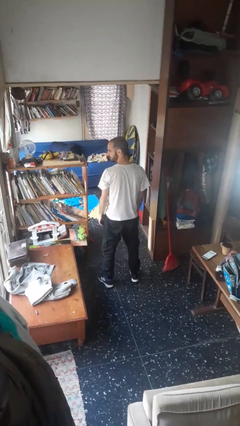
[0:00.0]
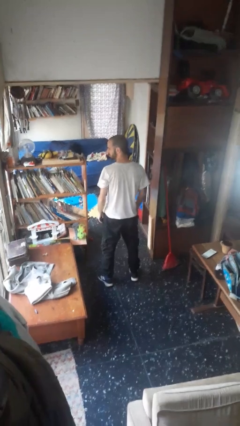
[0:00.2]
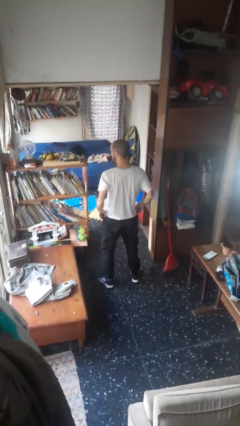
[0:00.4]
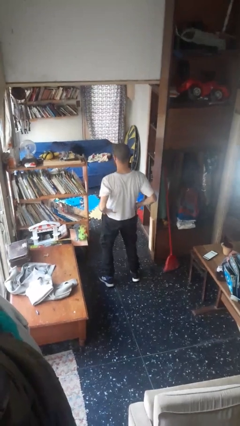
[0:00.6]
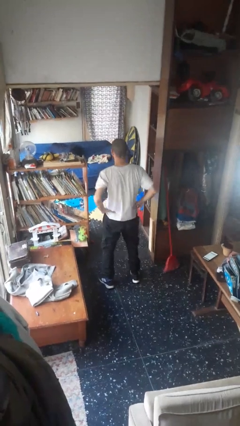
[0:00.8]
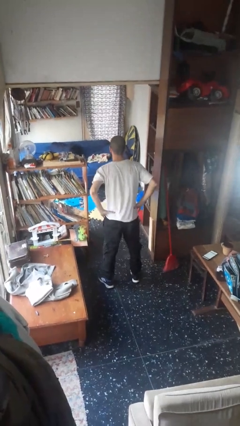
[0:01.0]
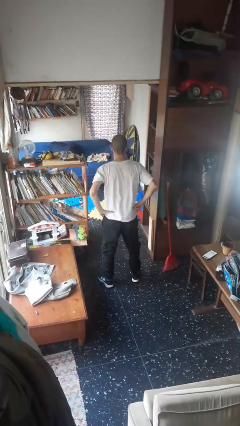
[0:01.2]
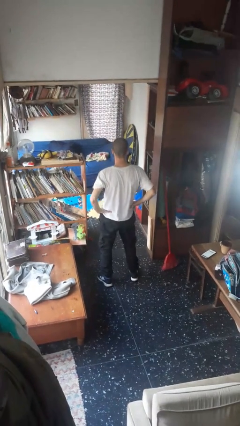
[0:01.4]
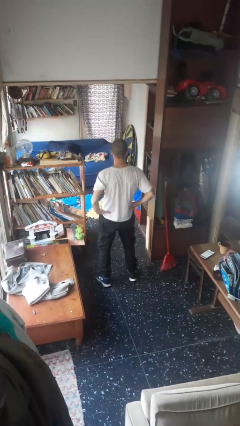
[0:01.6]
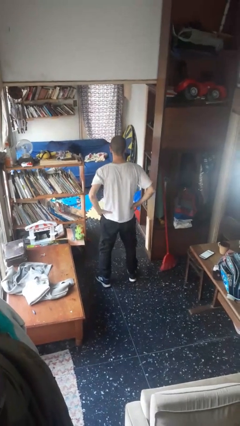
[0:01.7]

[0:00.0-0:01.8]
person wiggles hips

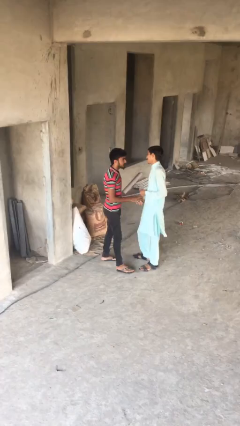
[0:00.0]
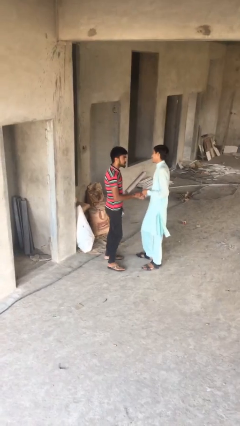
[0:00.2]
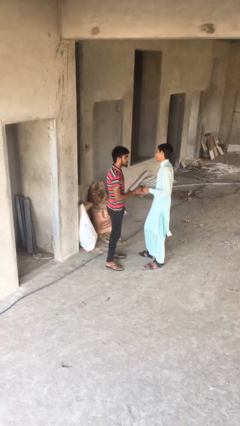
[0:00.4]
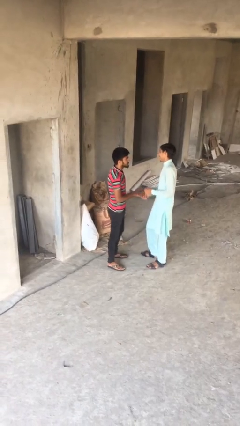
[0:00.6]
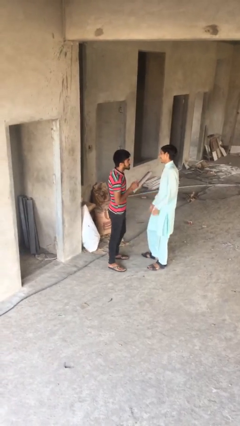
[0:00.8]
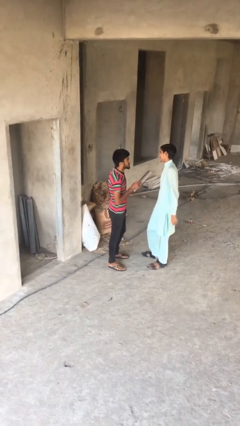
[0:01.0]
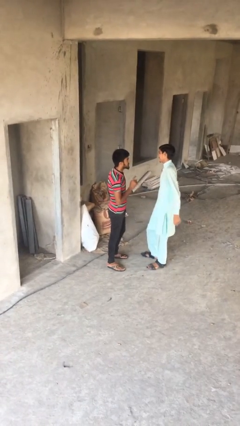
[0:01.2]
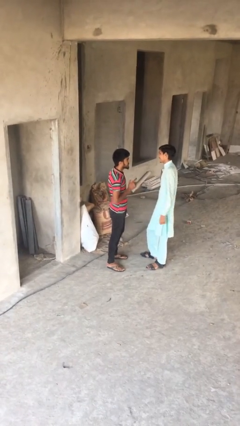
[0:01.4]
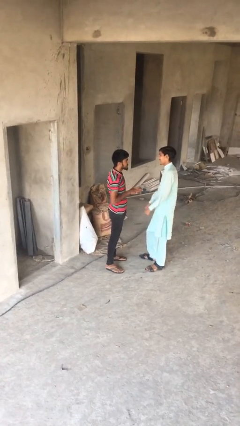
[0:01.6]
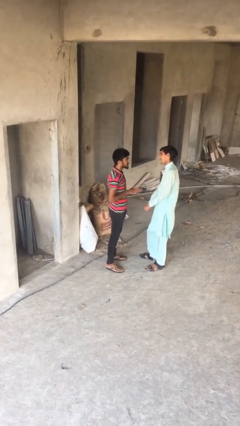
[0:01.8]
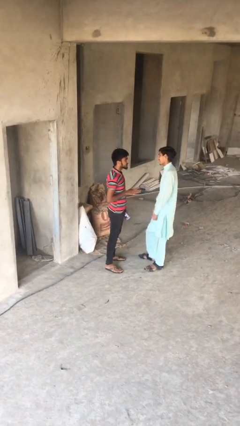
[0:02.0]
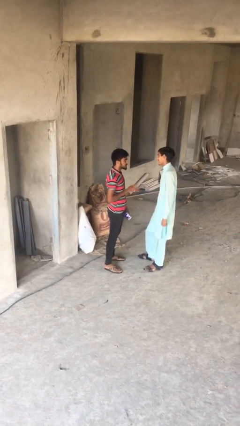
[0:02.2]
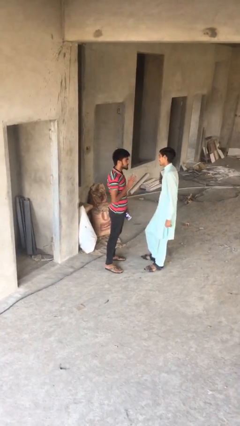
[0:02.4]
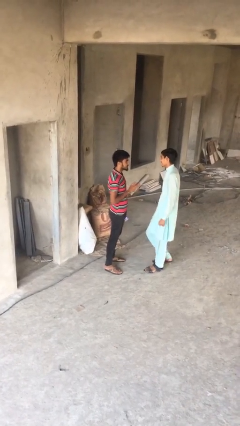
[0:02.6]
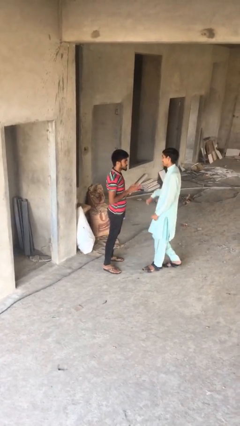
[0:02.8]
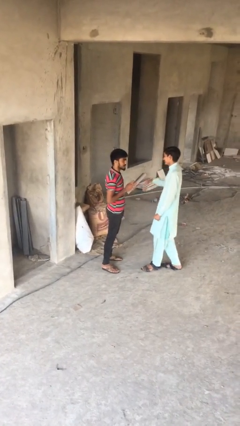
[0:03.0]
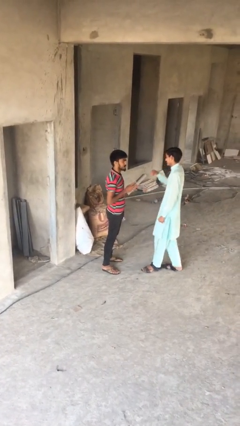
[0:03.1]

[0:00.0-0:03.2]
person talks to person

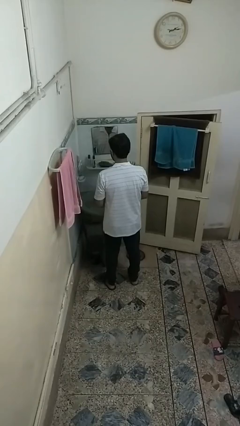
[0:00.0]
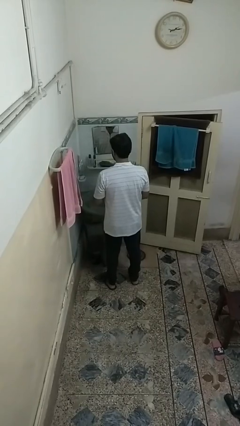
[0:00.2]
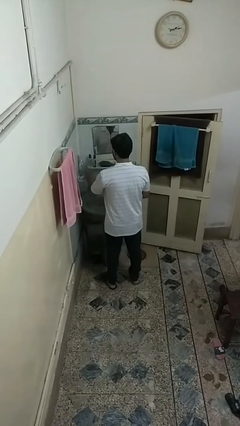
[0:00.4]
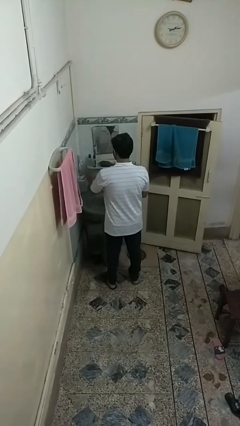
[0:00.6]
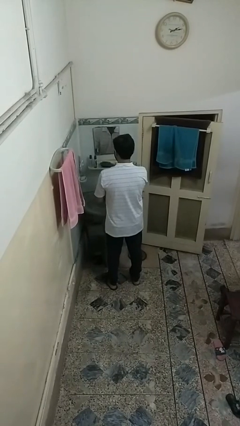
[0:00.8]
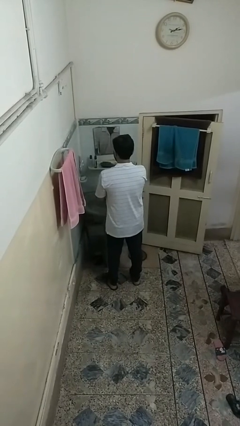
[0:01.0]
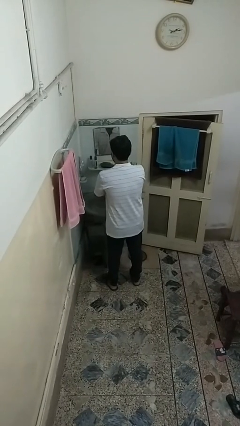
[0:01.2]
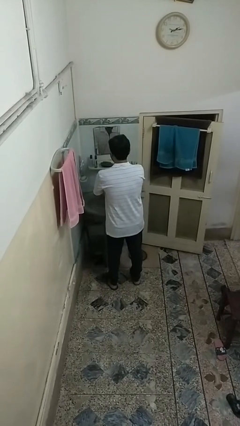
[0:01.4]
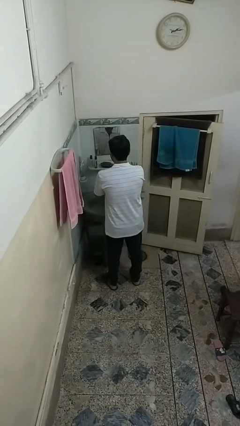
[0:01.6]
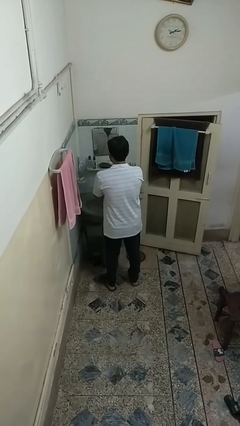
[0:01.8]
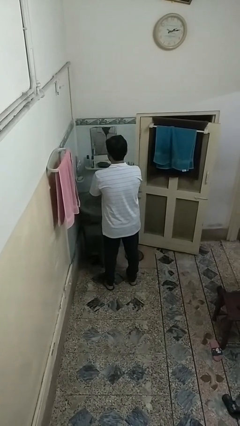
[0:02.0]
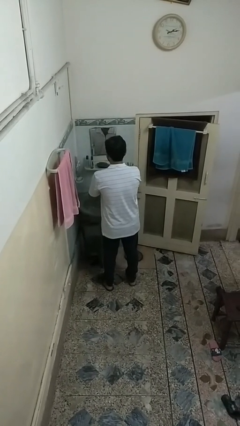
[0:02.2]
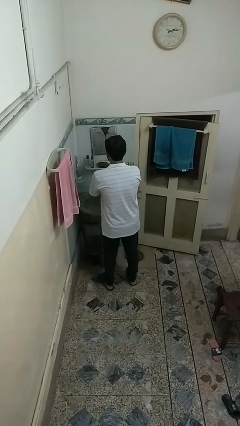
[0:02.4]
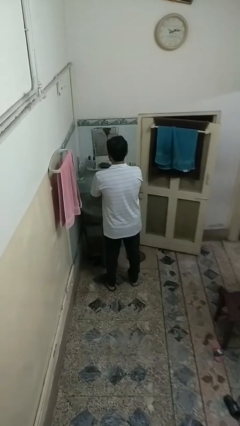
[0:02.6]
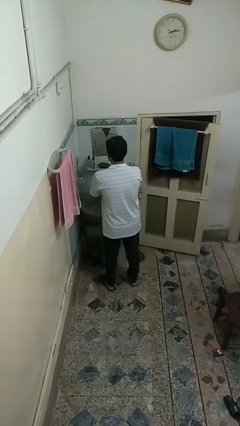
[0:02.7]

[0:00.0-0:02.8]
person washes hands

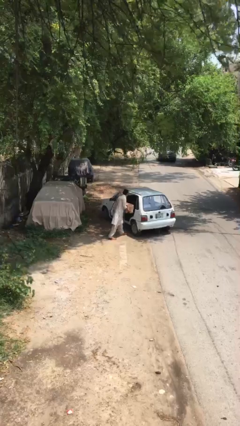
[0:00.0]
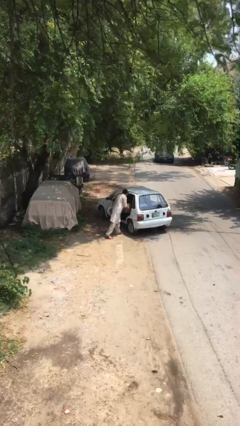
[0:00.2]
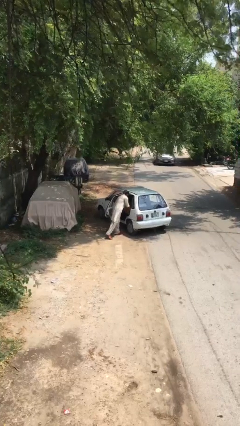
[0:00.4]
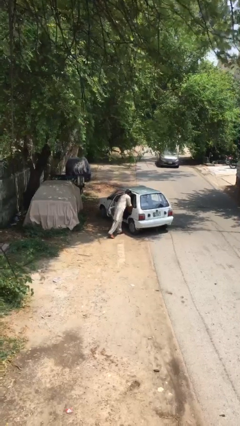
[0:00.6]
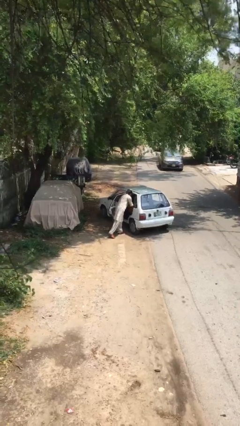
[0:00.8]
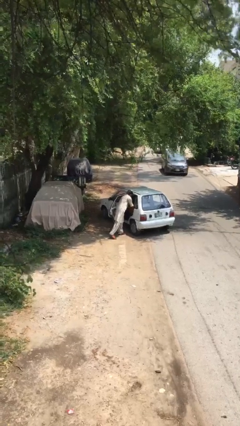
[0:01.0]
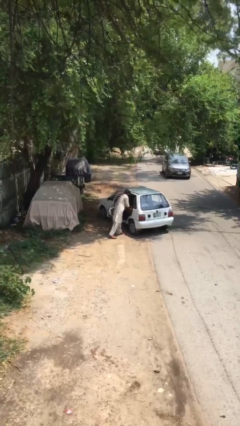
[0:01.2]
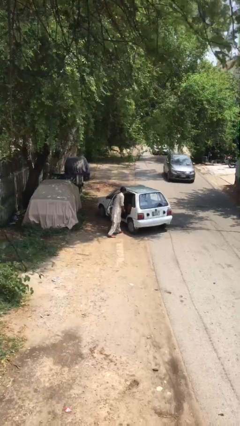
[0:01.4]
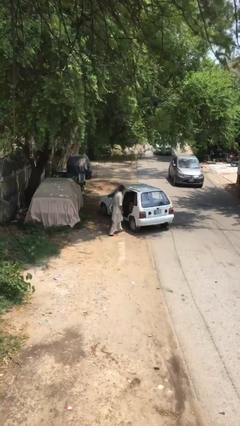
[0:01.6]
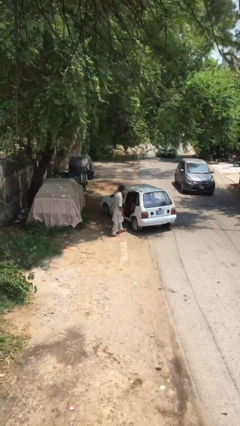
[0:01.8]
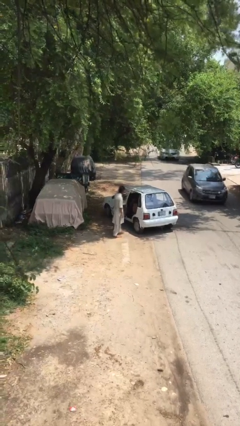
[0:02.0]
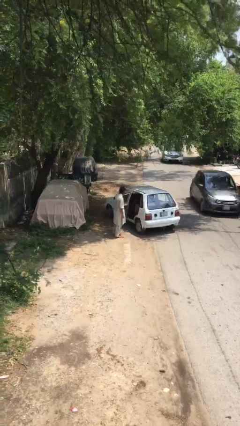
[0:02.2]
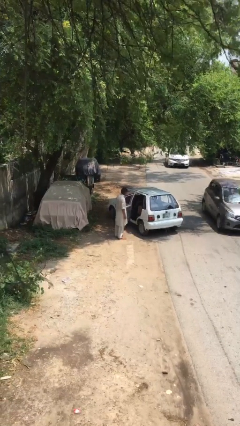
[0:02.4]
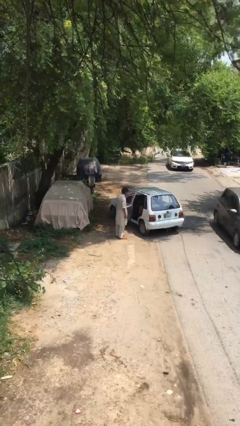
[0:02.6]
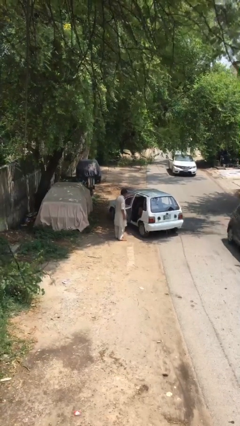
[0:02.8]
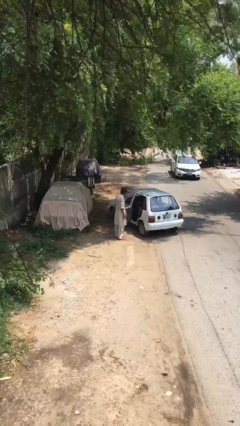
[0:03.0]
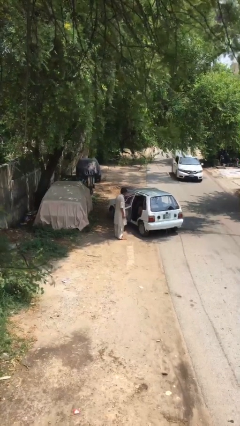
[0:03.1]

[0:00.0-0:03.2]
person loads car

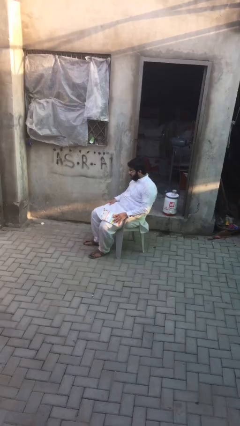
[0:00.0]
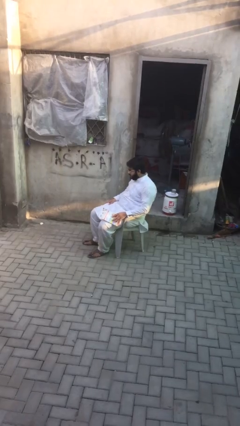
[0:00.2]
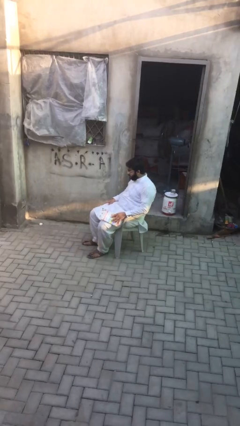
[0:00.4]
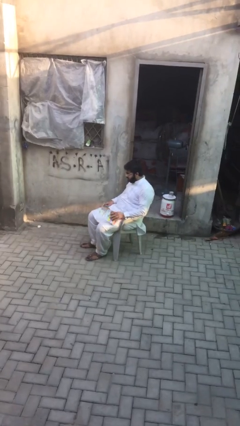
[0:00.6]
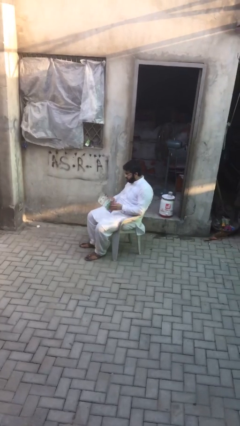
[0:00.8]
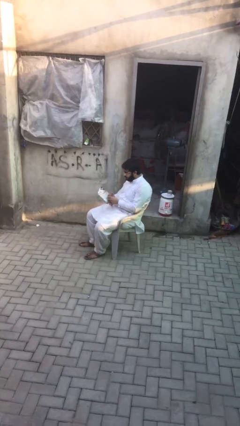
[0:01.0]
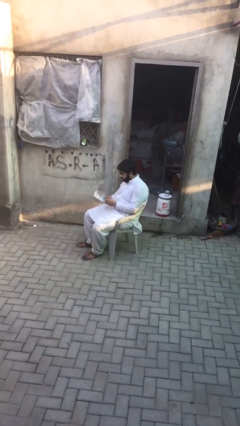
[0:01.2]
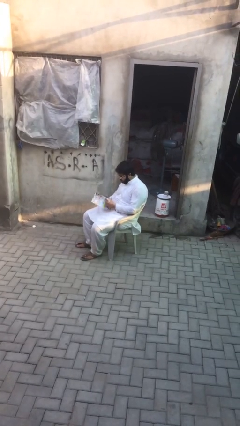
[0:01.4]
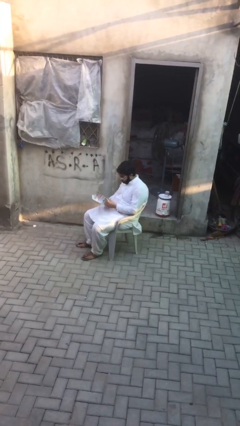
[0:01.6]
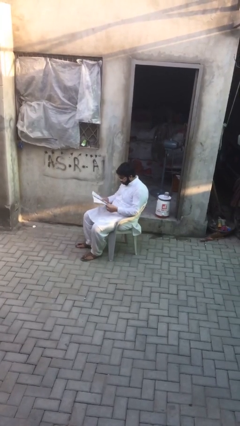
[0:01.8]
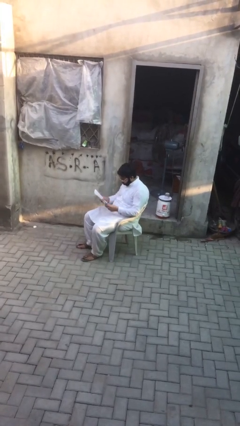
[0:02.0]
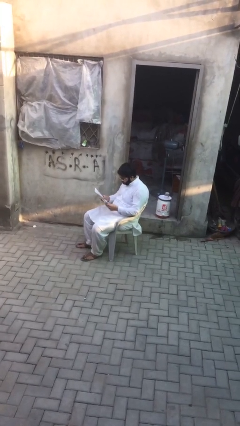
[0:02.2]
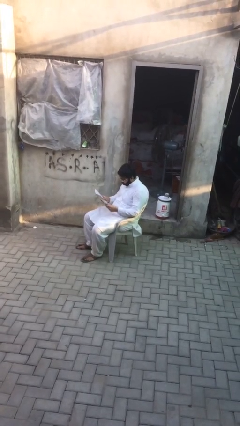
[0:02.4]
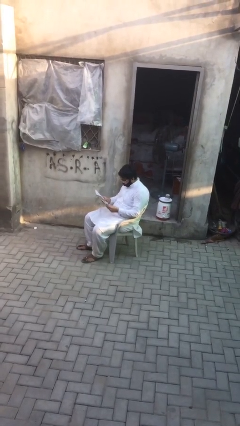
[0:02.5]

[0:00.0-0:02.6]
person reads document

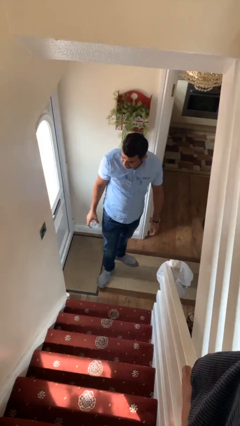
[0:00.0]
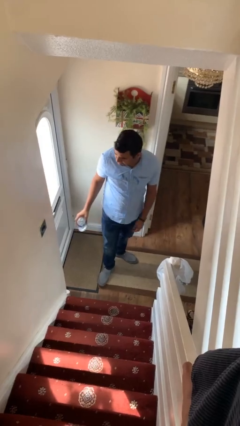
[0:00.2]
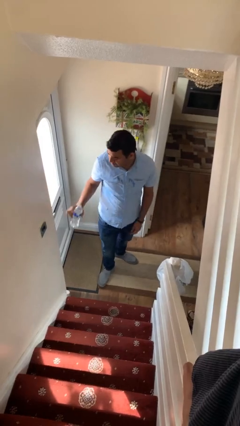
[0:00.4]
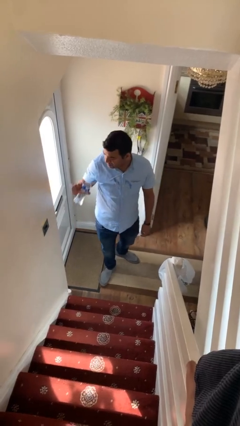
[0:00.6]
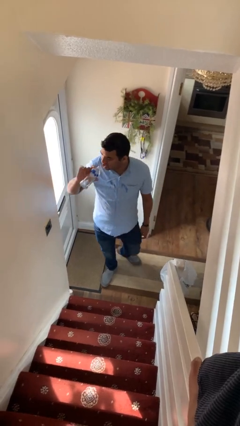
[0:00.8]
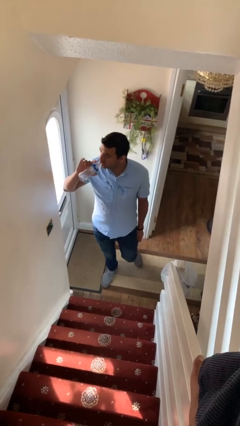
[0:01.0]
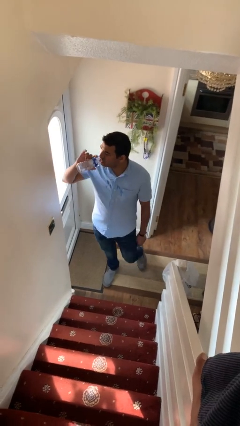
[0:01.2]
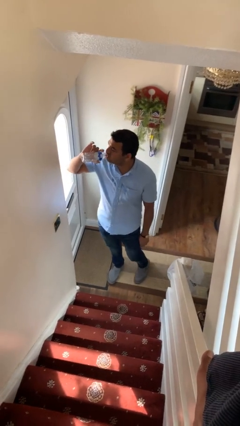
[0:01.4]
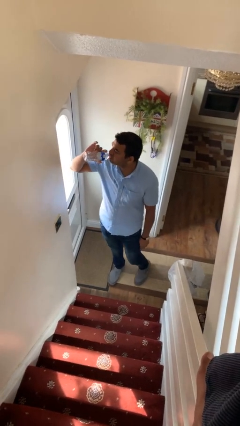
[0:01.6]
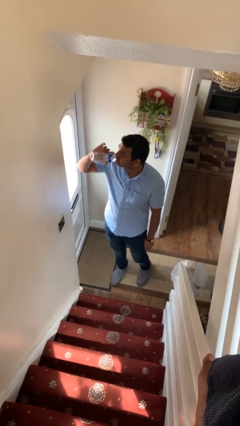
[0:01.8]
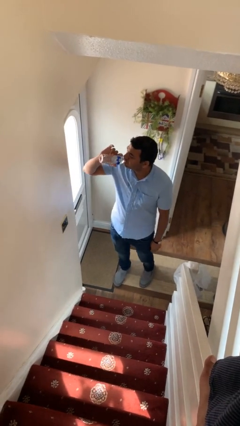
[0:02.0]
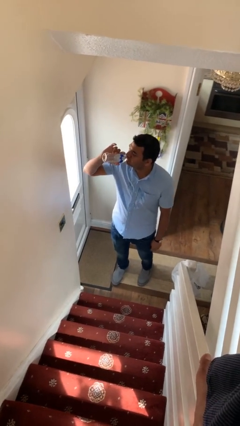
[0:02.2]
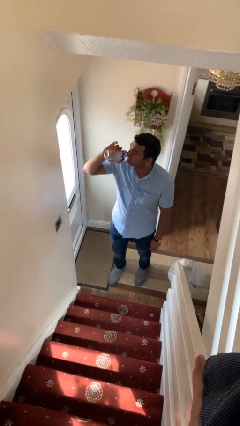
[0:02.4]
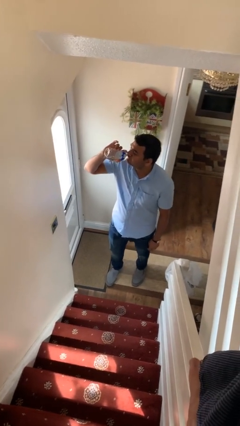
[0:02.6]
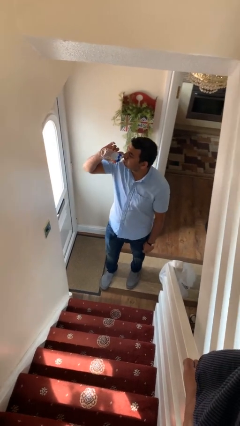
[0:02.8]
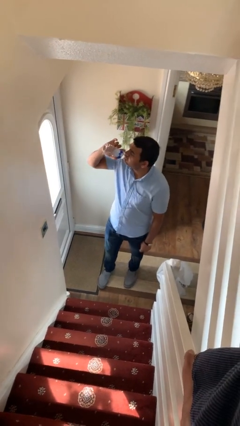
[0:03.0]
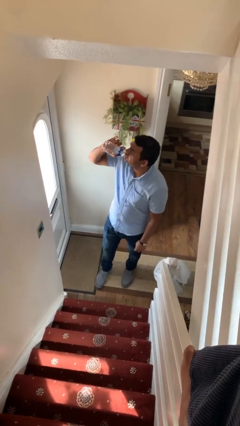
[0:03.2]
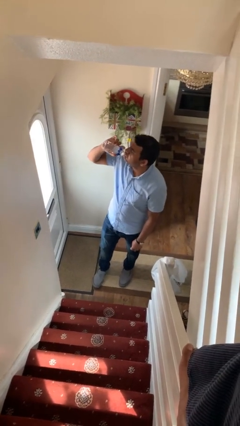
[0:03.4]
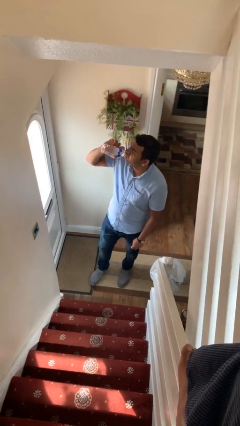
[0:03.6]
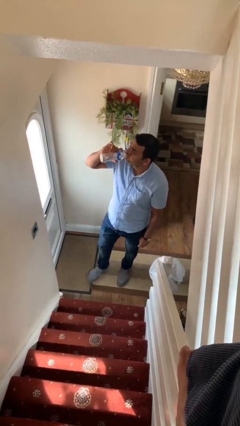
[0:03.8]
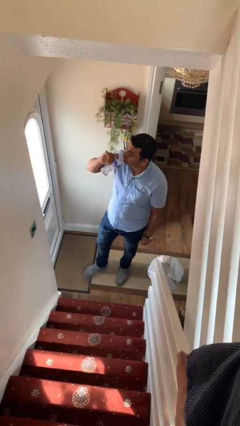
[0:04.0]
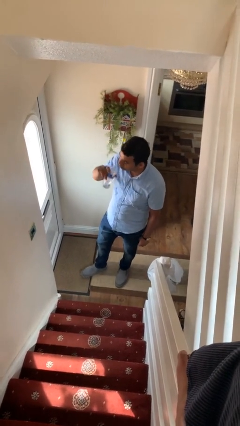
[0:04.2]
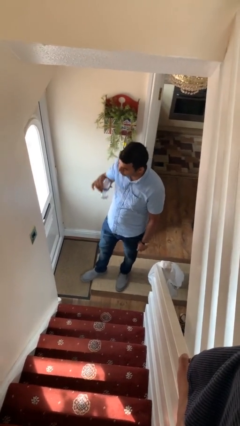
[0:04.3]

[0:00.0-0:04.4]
person drinks from bottle
